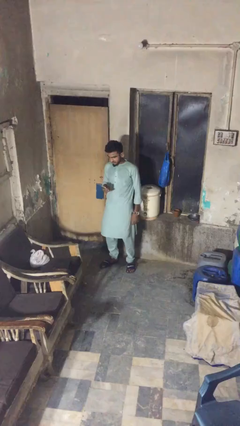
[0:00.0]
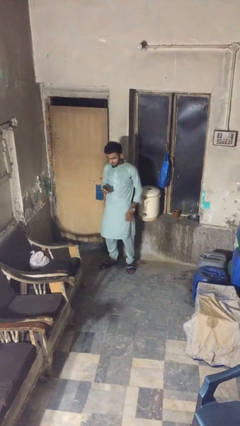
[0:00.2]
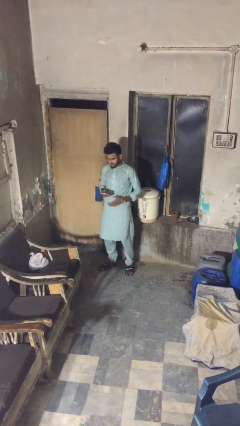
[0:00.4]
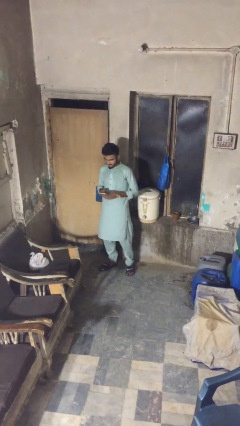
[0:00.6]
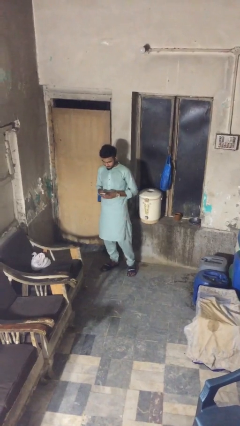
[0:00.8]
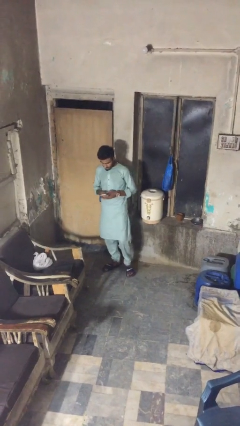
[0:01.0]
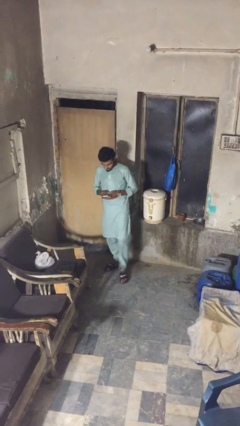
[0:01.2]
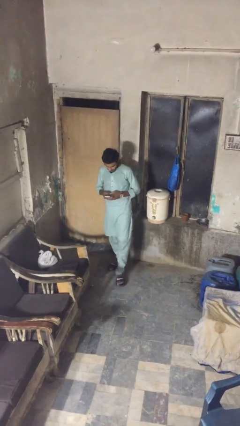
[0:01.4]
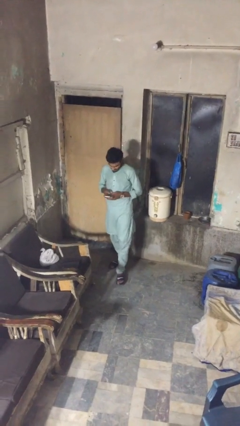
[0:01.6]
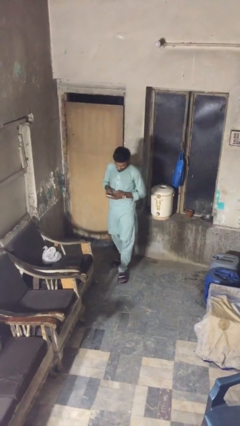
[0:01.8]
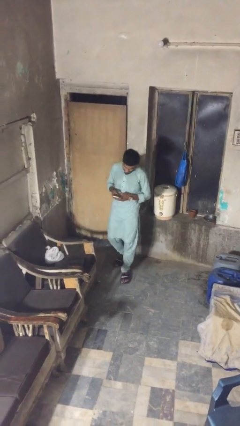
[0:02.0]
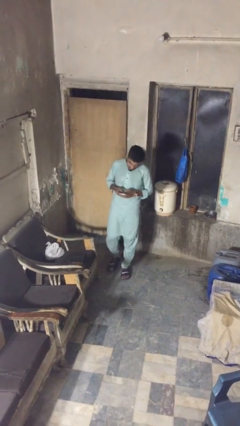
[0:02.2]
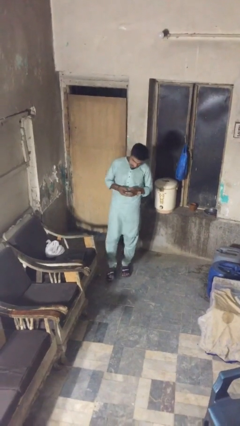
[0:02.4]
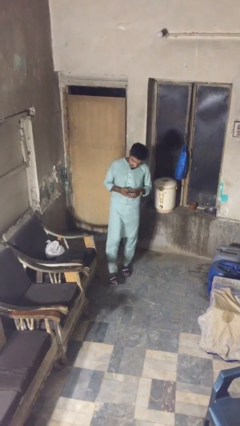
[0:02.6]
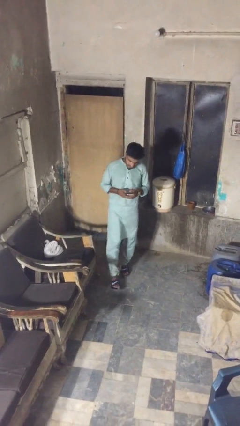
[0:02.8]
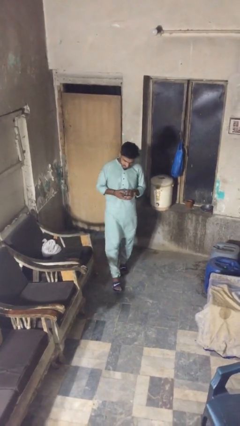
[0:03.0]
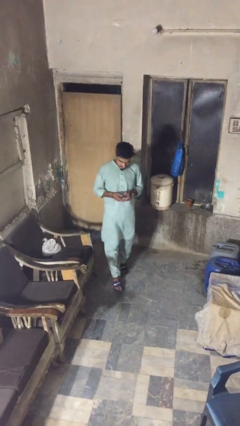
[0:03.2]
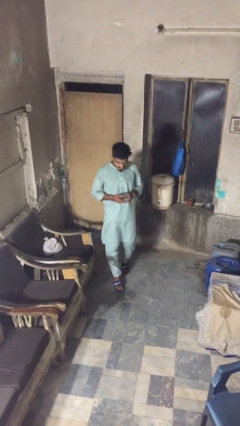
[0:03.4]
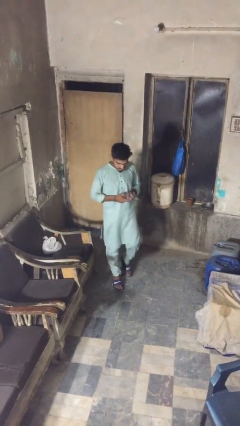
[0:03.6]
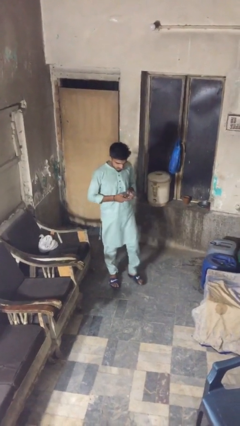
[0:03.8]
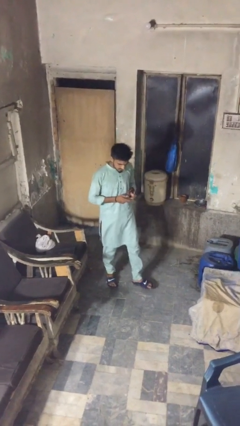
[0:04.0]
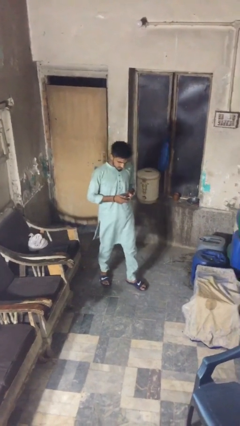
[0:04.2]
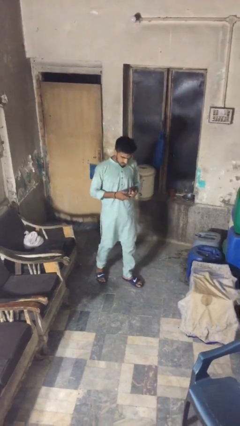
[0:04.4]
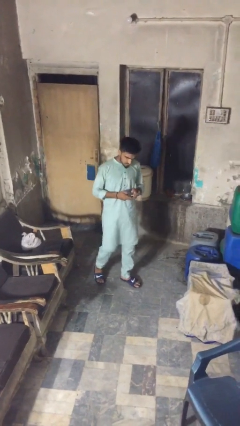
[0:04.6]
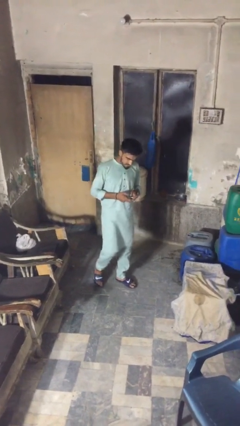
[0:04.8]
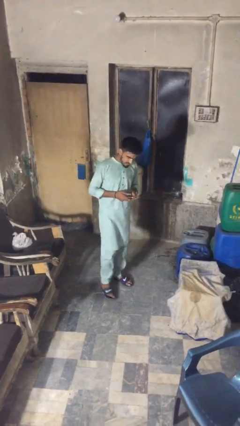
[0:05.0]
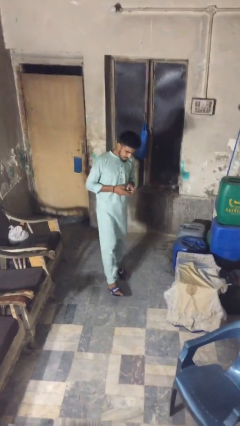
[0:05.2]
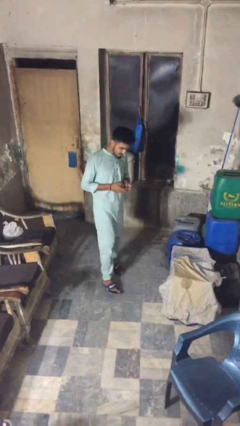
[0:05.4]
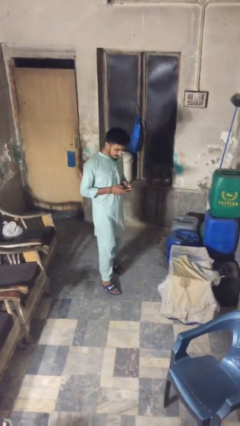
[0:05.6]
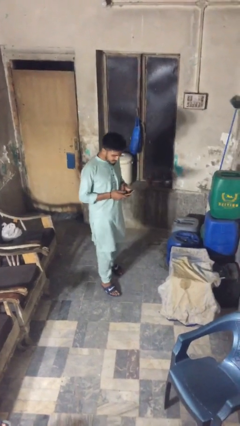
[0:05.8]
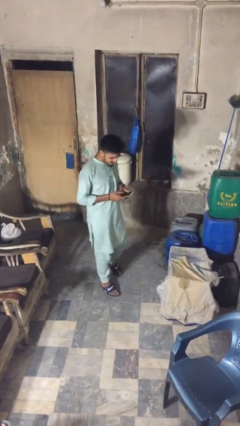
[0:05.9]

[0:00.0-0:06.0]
person texts on phone

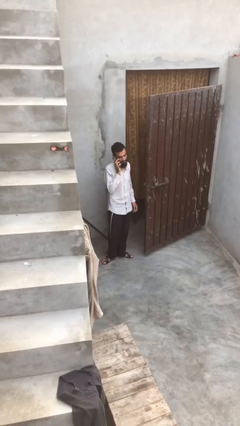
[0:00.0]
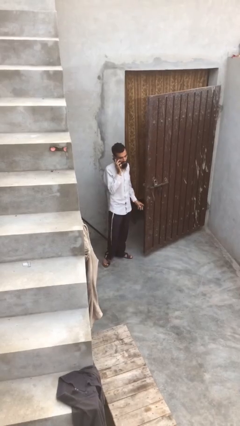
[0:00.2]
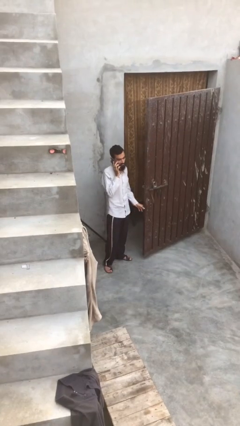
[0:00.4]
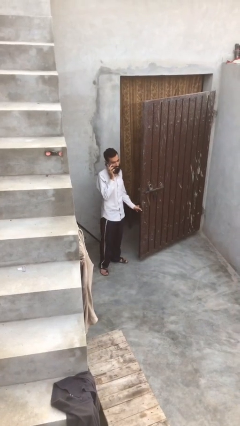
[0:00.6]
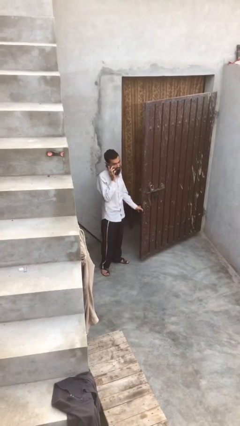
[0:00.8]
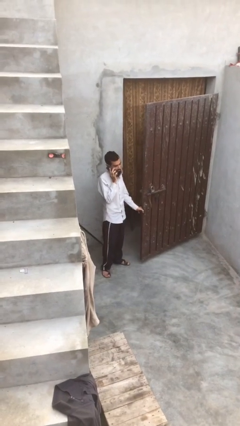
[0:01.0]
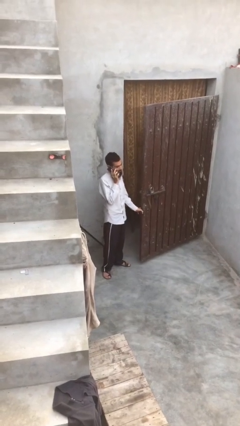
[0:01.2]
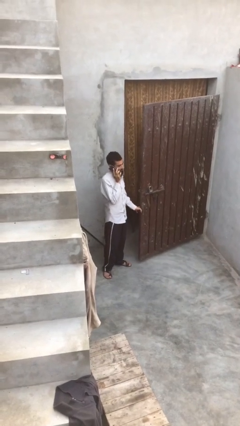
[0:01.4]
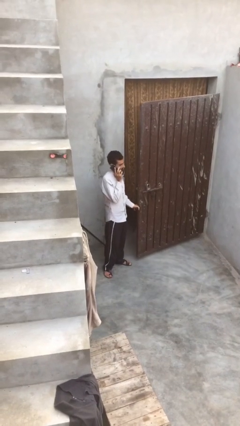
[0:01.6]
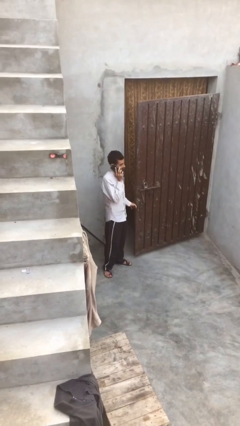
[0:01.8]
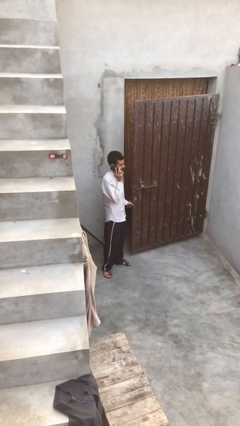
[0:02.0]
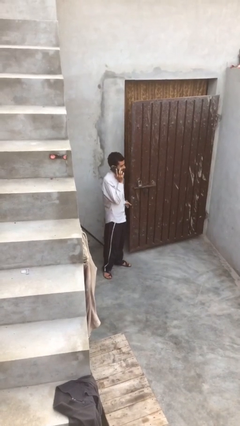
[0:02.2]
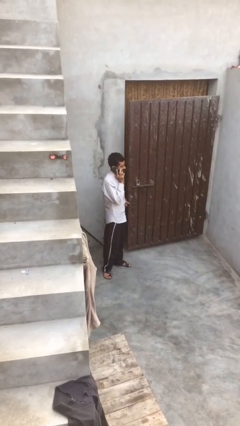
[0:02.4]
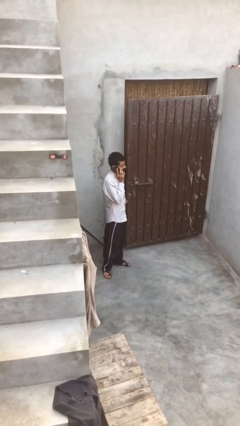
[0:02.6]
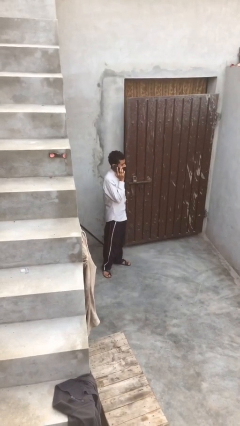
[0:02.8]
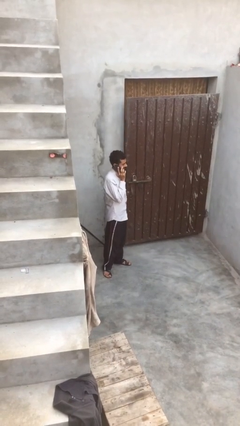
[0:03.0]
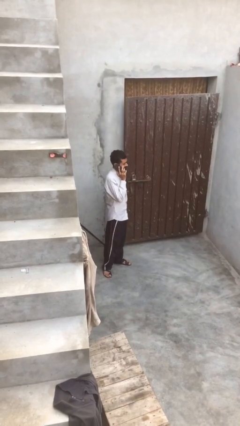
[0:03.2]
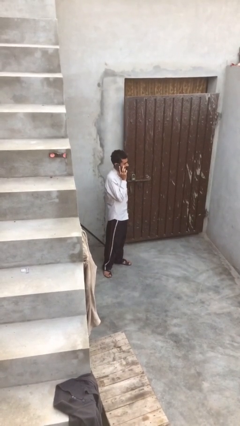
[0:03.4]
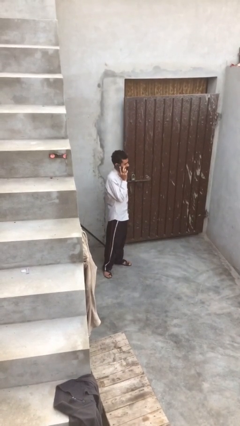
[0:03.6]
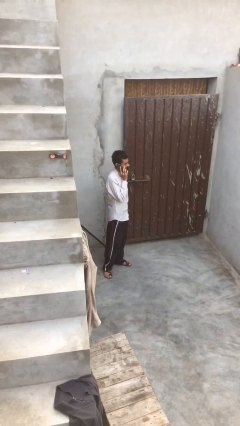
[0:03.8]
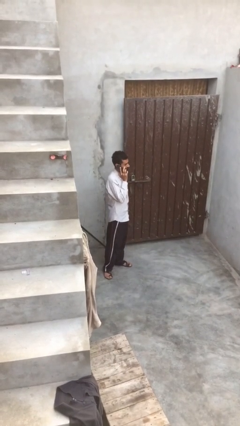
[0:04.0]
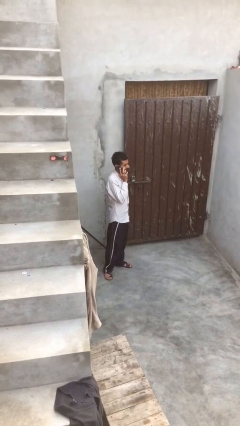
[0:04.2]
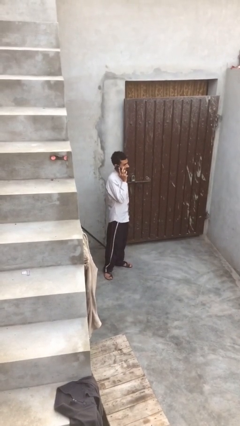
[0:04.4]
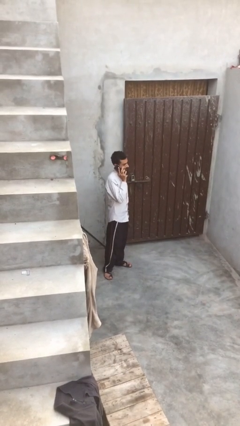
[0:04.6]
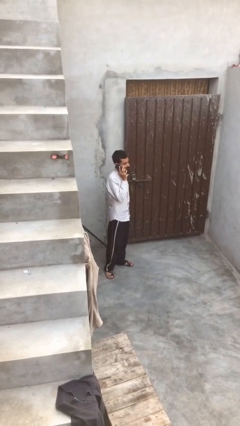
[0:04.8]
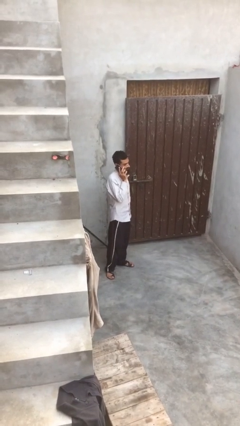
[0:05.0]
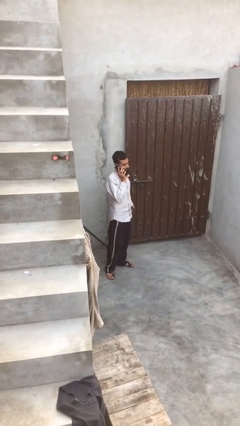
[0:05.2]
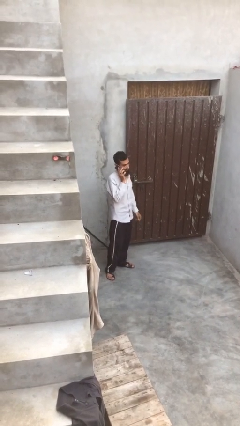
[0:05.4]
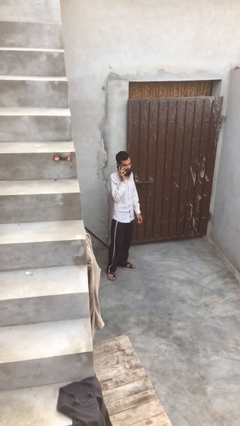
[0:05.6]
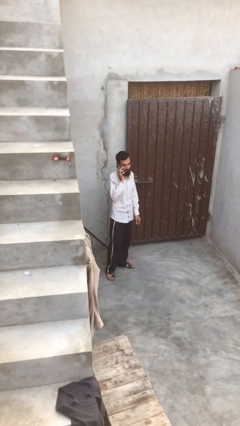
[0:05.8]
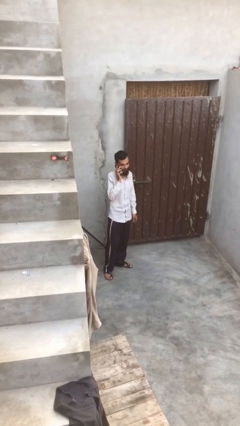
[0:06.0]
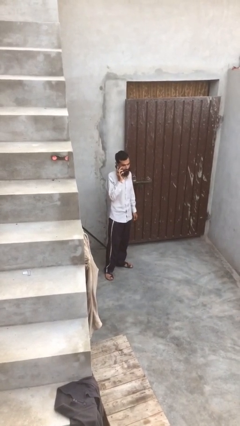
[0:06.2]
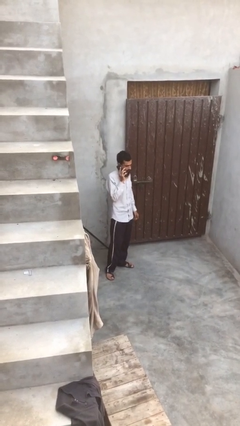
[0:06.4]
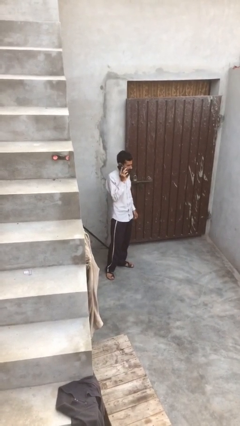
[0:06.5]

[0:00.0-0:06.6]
person closes facility door

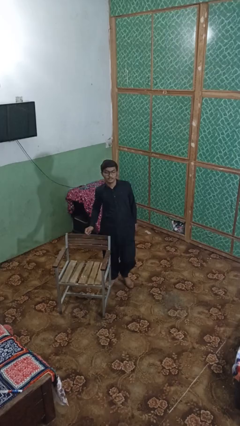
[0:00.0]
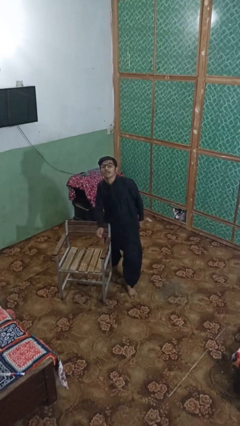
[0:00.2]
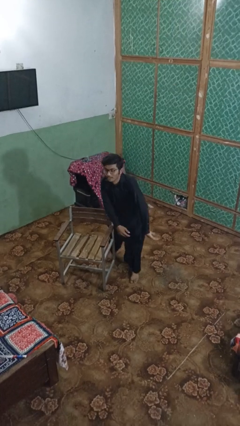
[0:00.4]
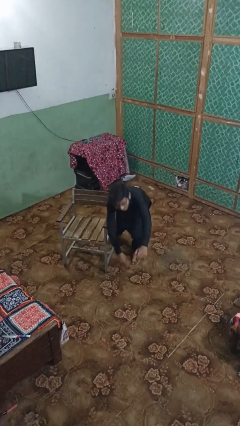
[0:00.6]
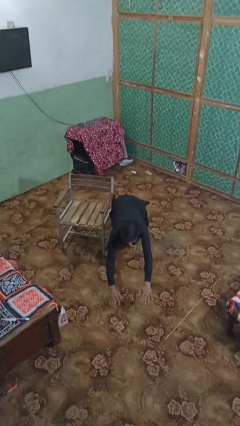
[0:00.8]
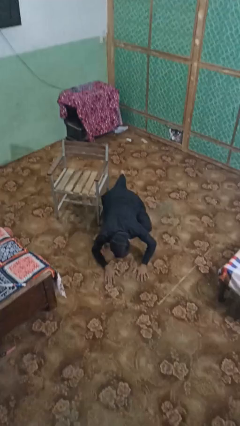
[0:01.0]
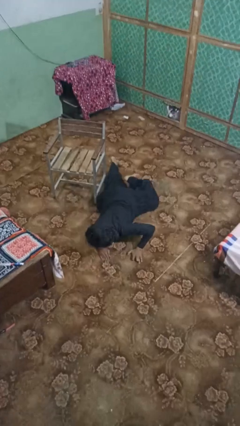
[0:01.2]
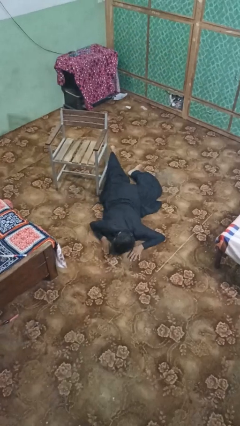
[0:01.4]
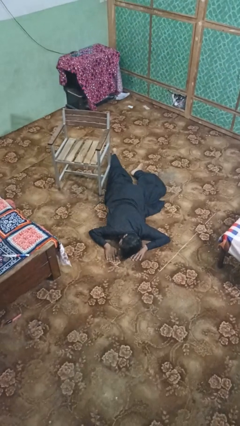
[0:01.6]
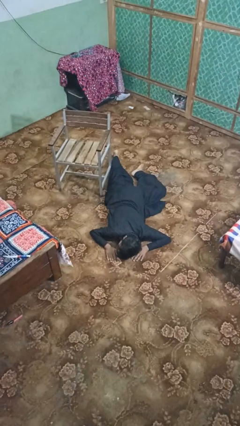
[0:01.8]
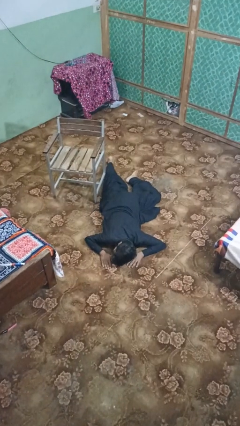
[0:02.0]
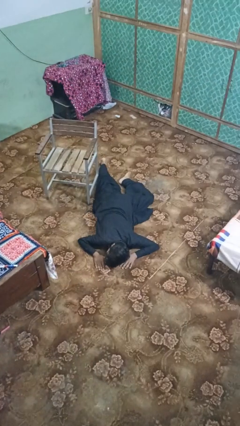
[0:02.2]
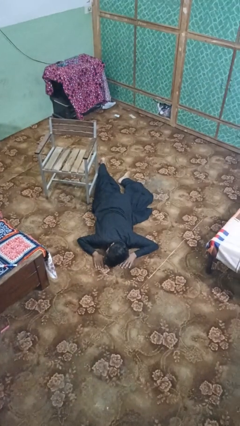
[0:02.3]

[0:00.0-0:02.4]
person lies down on floor

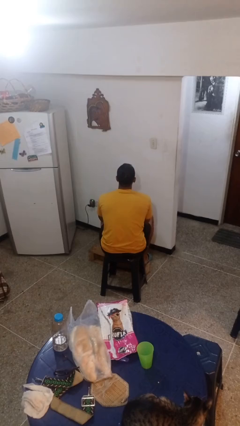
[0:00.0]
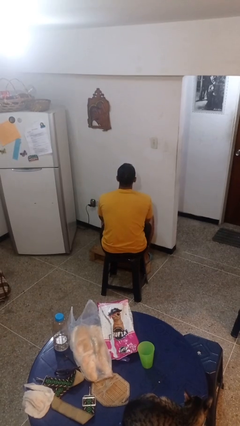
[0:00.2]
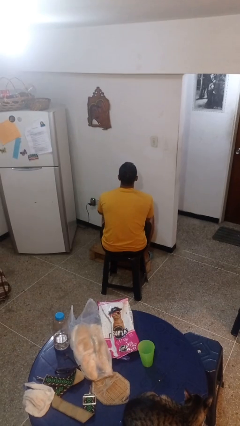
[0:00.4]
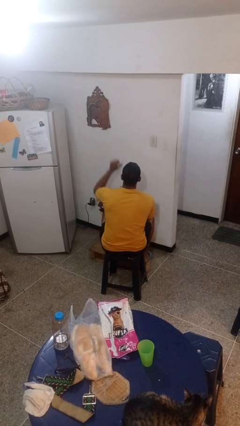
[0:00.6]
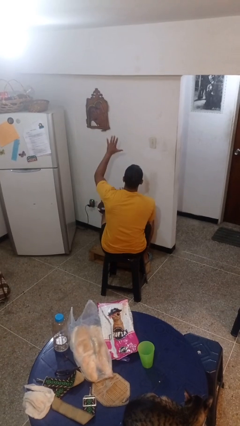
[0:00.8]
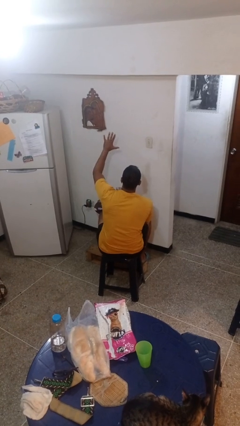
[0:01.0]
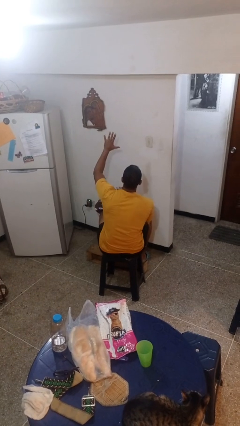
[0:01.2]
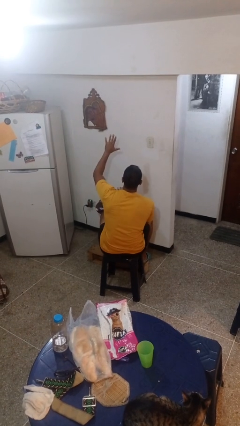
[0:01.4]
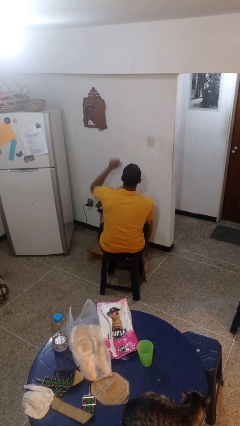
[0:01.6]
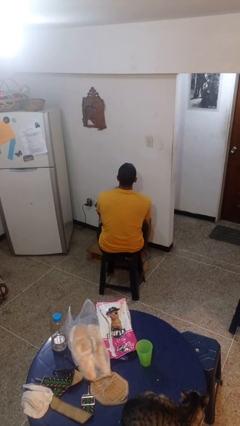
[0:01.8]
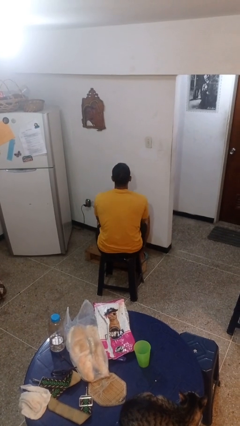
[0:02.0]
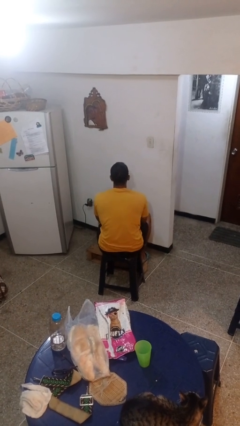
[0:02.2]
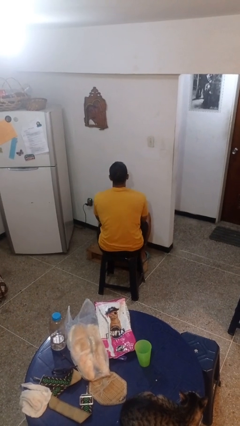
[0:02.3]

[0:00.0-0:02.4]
person gestures number five
